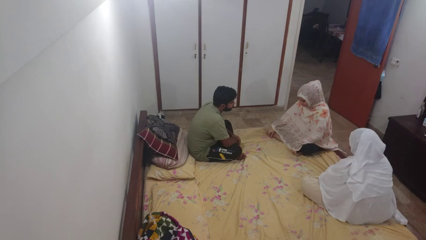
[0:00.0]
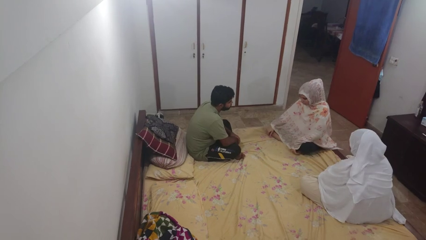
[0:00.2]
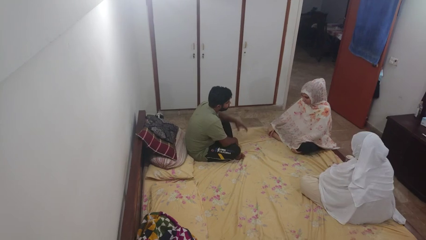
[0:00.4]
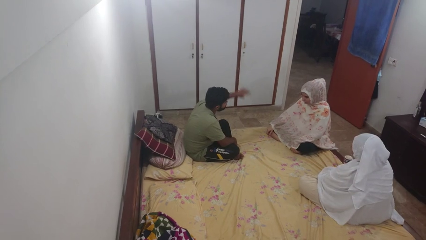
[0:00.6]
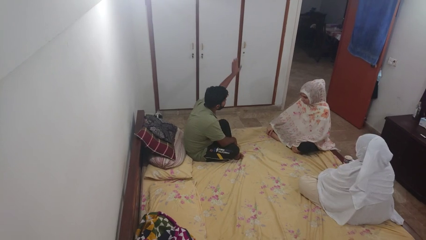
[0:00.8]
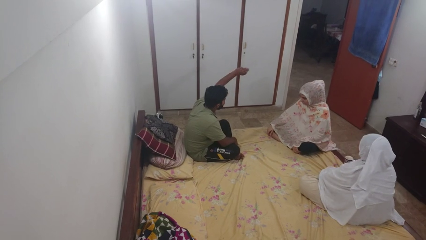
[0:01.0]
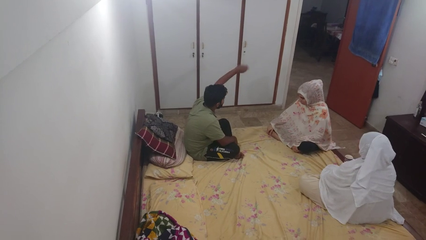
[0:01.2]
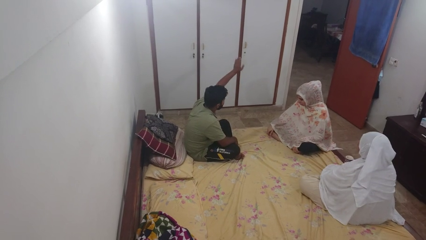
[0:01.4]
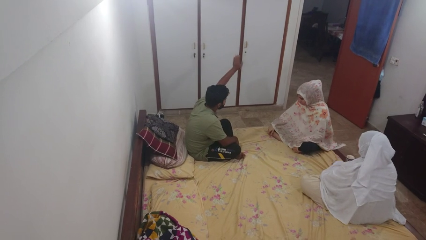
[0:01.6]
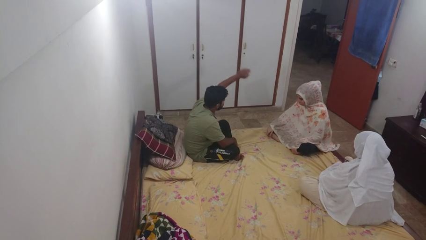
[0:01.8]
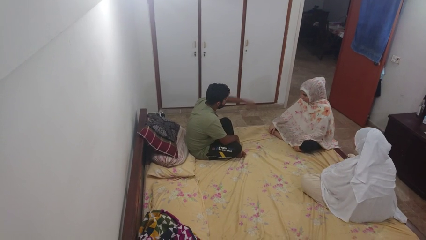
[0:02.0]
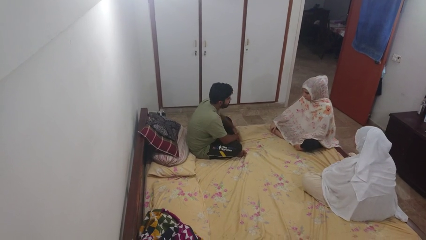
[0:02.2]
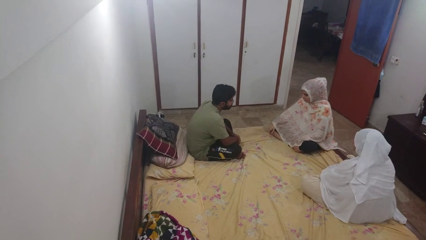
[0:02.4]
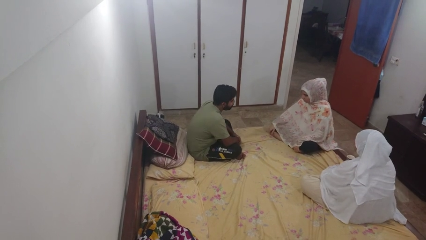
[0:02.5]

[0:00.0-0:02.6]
person waves at person

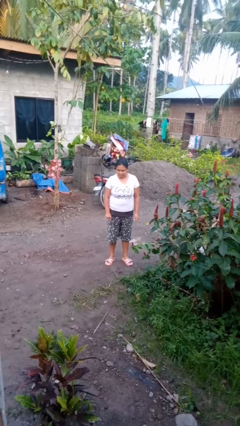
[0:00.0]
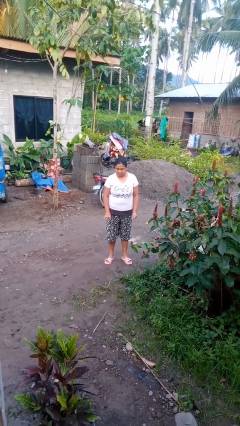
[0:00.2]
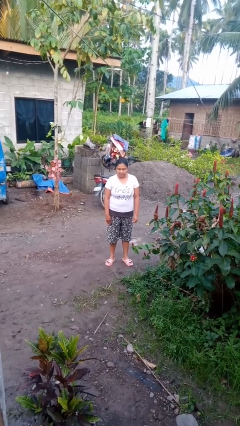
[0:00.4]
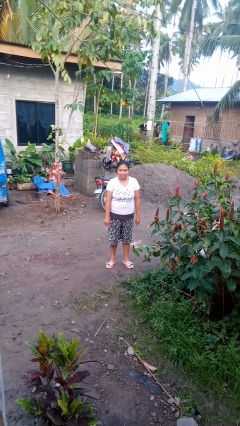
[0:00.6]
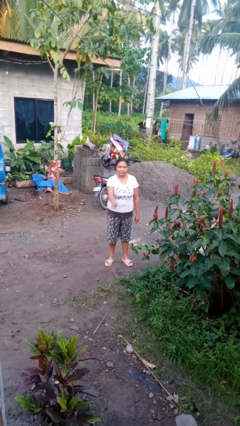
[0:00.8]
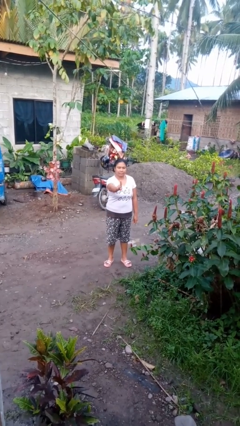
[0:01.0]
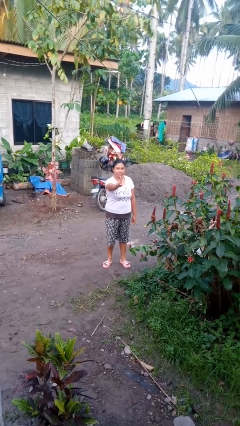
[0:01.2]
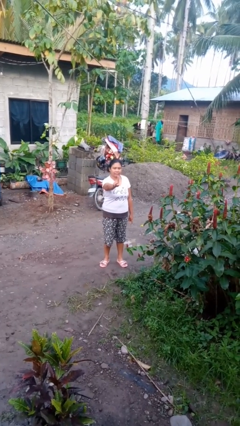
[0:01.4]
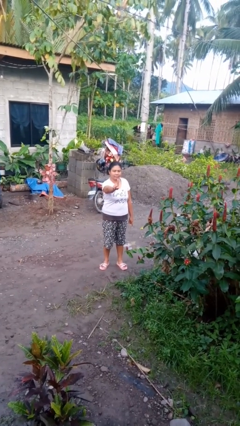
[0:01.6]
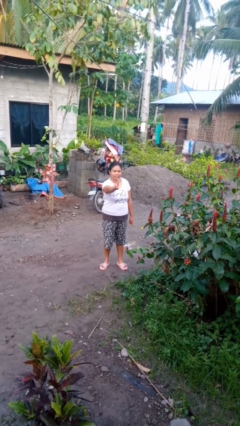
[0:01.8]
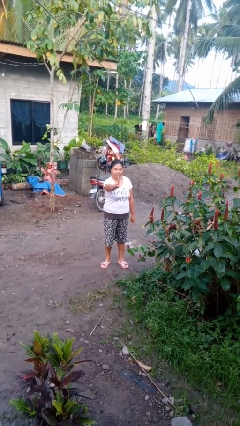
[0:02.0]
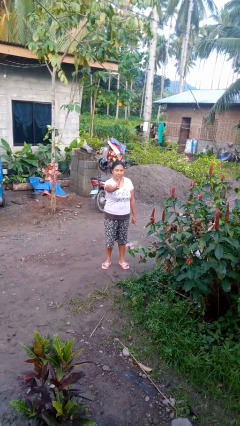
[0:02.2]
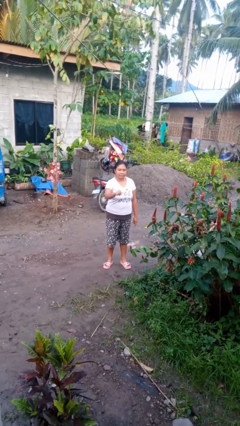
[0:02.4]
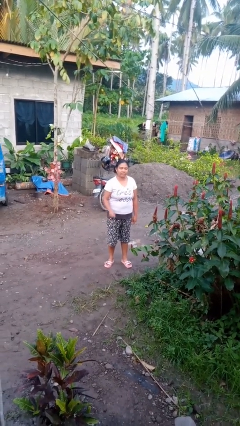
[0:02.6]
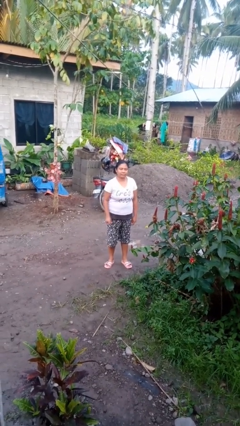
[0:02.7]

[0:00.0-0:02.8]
person gestures number one

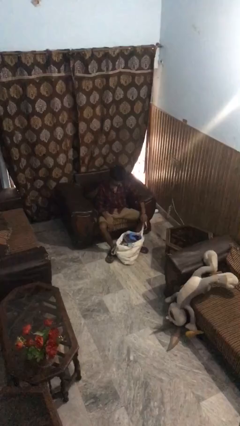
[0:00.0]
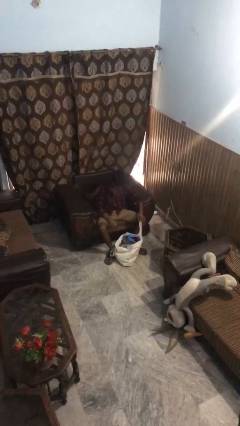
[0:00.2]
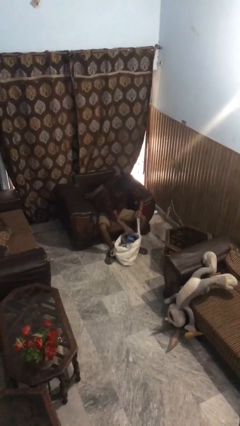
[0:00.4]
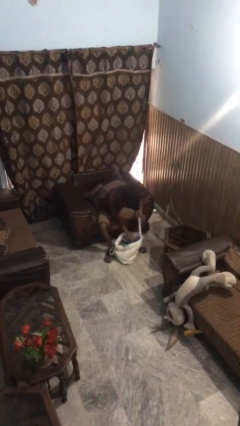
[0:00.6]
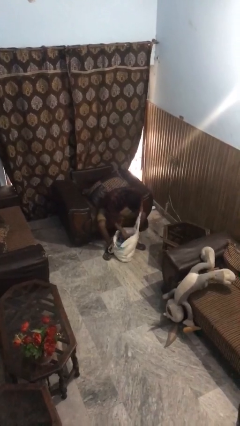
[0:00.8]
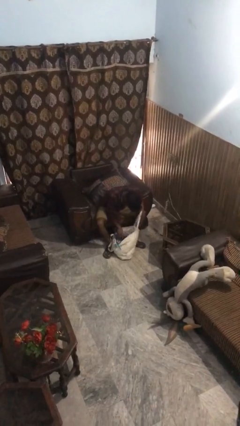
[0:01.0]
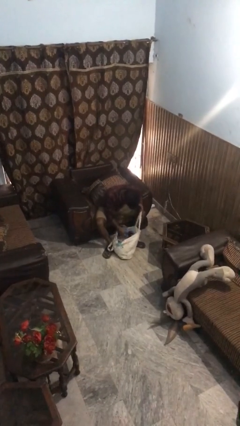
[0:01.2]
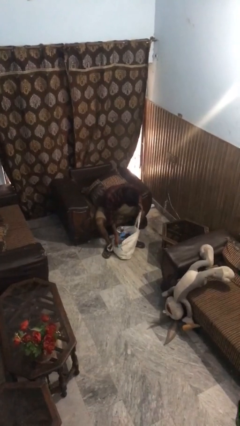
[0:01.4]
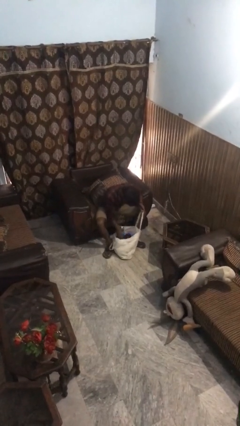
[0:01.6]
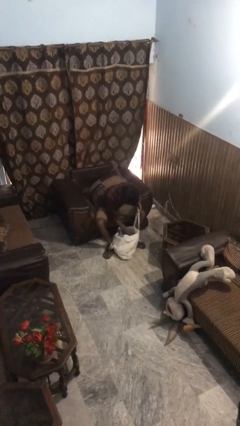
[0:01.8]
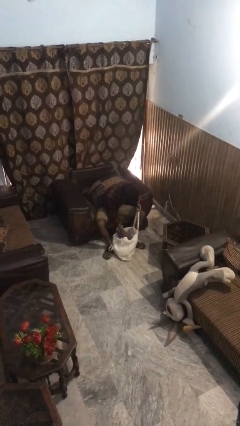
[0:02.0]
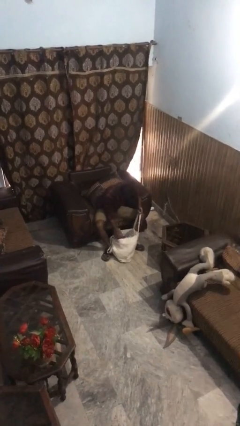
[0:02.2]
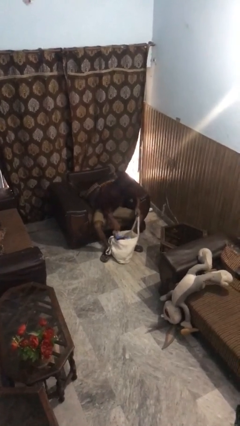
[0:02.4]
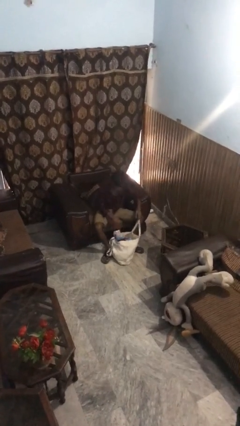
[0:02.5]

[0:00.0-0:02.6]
person searches in bag

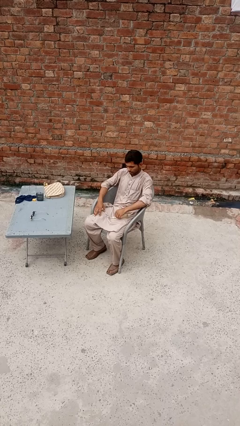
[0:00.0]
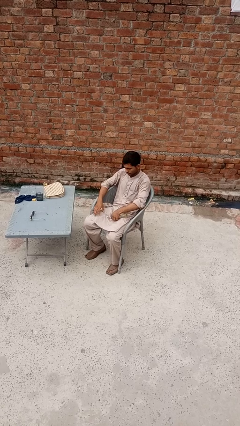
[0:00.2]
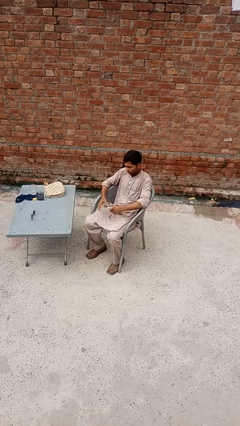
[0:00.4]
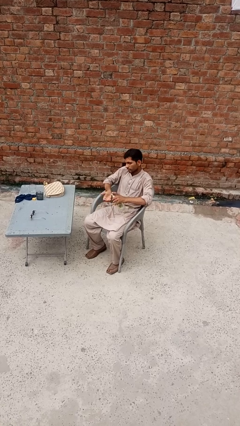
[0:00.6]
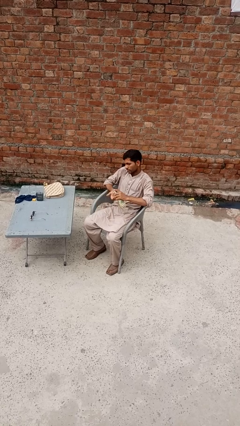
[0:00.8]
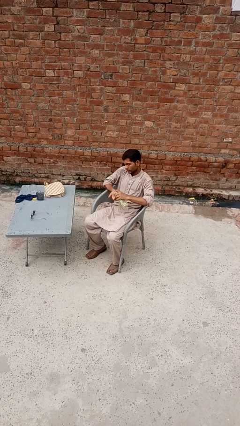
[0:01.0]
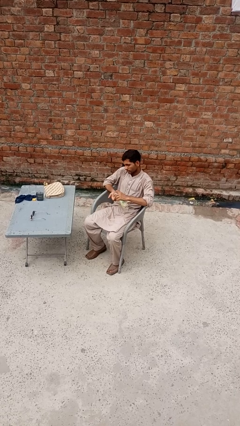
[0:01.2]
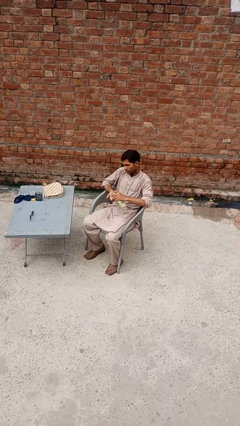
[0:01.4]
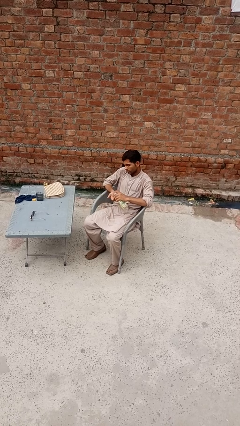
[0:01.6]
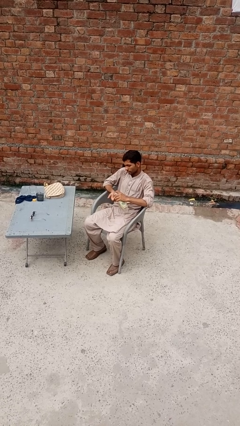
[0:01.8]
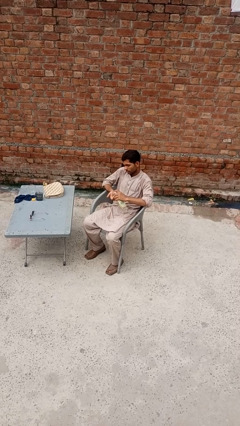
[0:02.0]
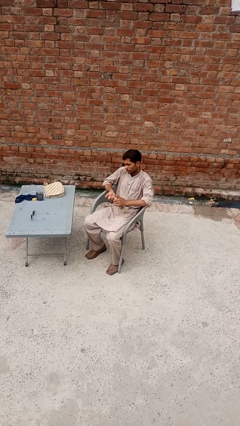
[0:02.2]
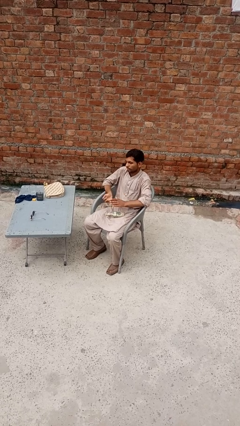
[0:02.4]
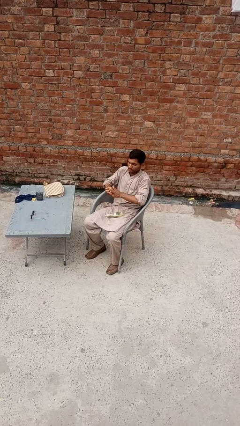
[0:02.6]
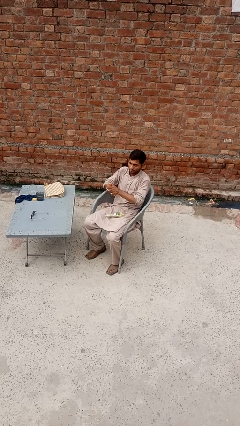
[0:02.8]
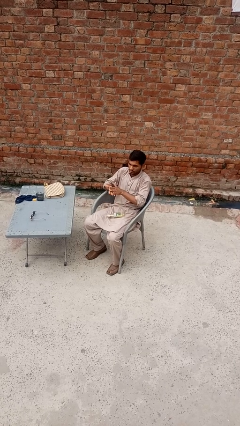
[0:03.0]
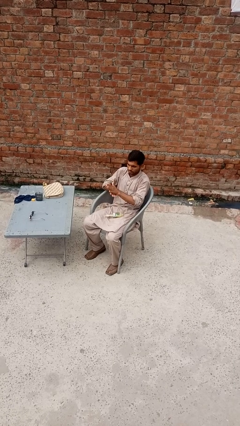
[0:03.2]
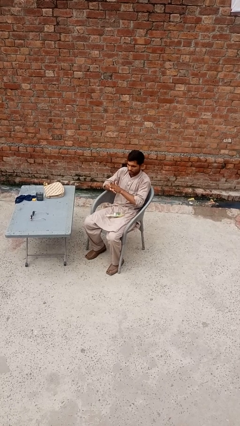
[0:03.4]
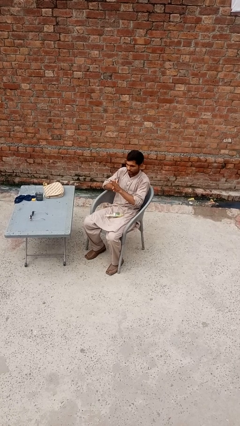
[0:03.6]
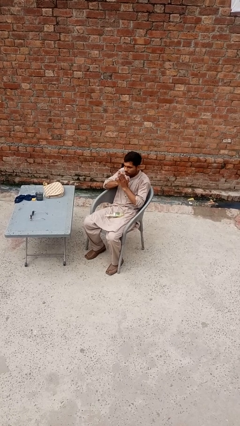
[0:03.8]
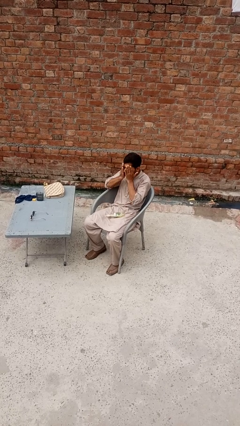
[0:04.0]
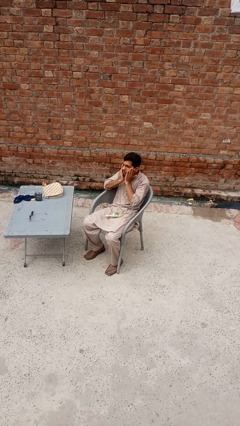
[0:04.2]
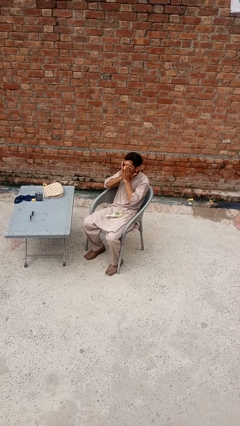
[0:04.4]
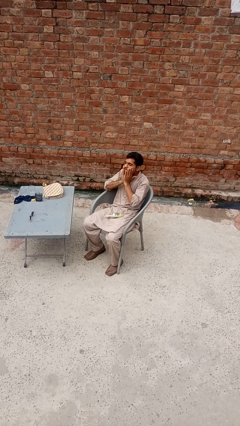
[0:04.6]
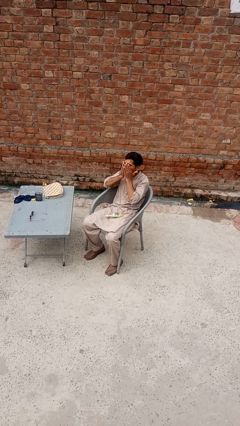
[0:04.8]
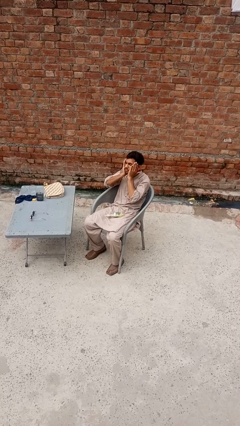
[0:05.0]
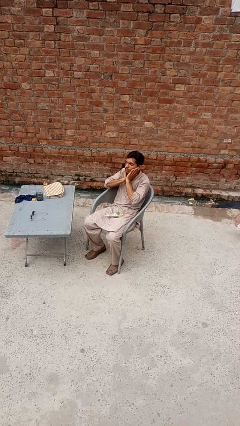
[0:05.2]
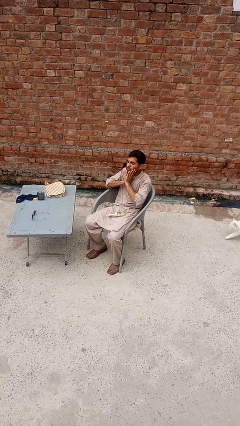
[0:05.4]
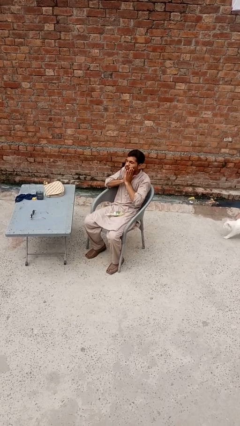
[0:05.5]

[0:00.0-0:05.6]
person applies sunscreen

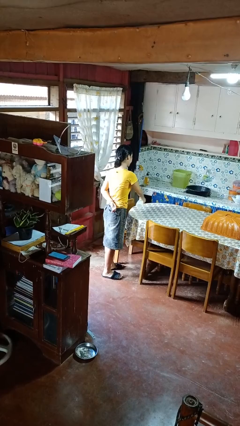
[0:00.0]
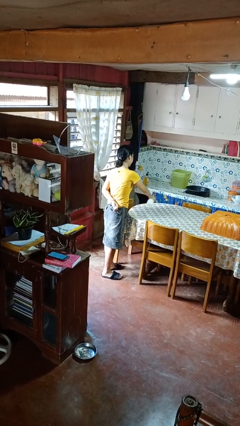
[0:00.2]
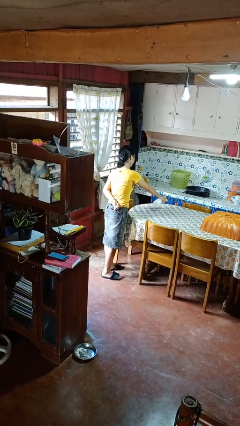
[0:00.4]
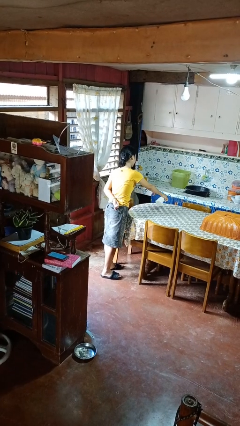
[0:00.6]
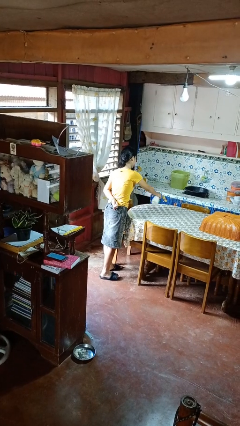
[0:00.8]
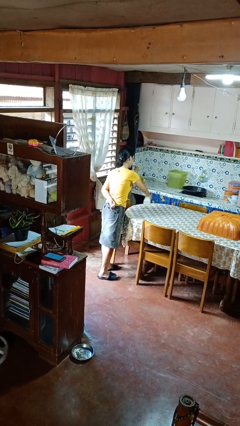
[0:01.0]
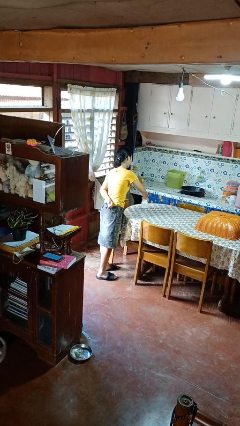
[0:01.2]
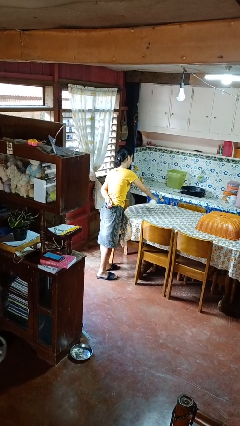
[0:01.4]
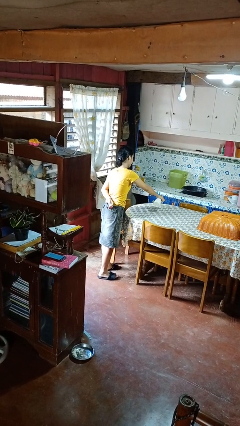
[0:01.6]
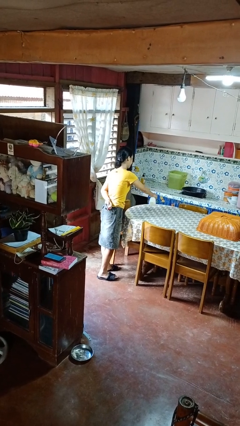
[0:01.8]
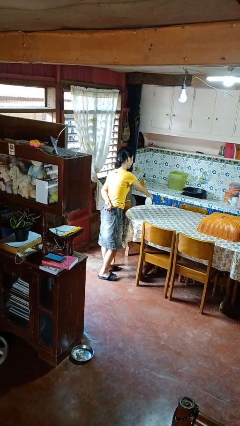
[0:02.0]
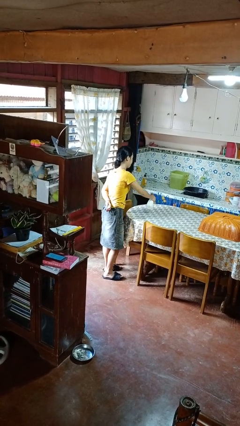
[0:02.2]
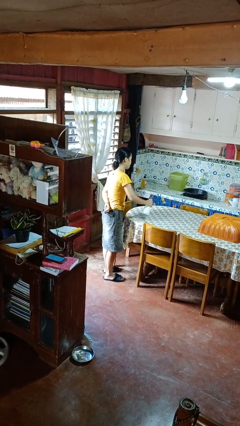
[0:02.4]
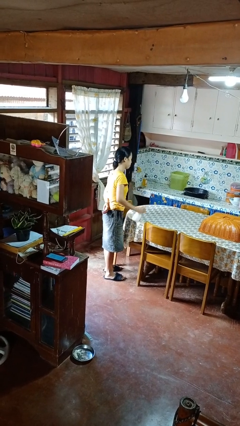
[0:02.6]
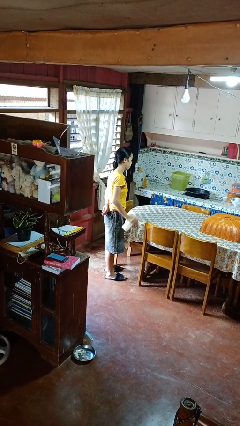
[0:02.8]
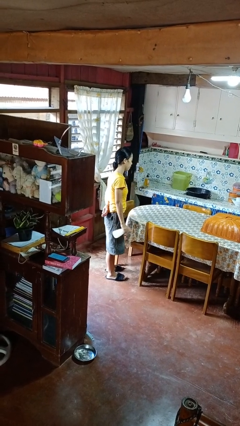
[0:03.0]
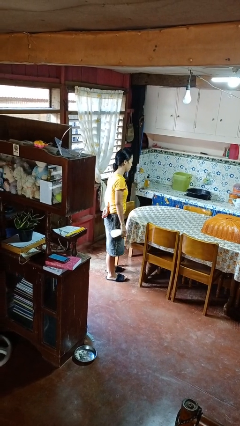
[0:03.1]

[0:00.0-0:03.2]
person sprays from bottle

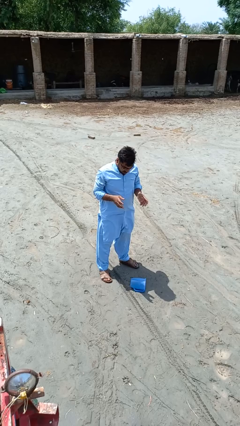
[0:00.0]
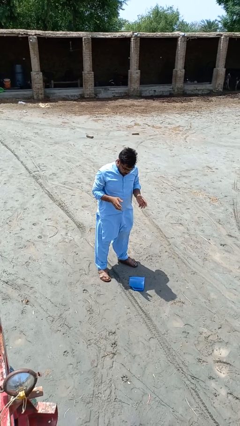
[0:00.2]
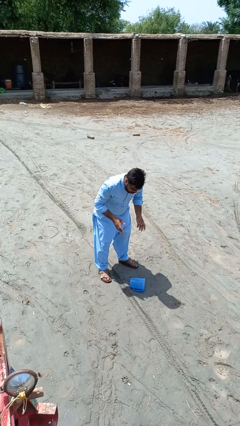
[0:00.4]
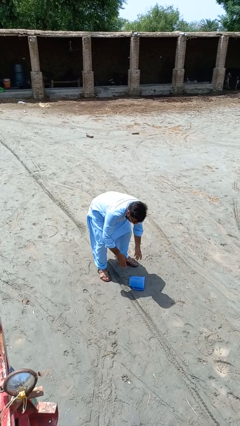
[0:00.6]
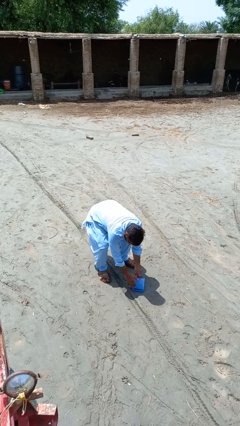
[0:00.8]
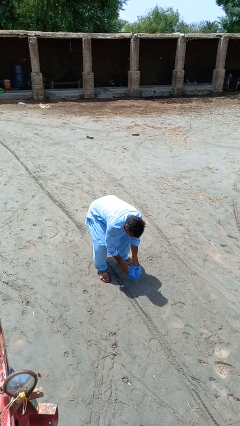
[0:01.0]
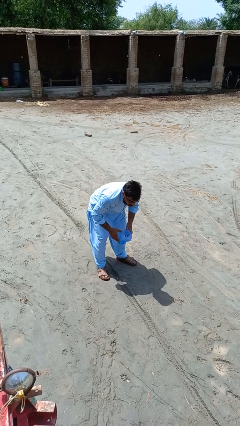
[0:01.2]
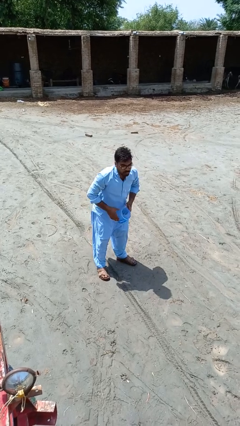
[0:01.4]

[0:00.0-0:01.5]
person picks up object from floor
